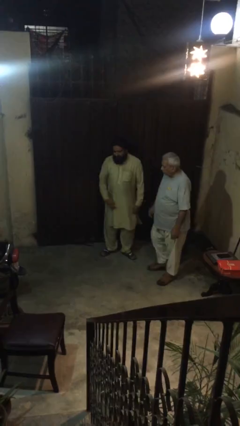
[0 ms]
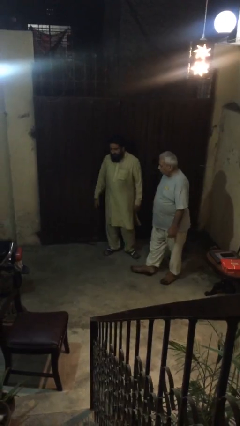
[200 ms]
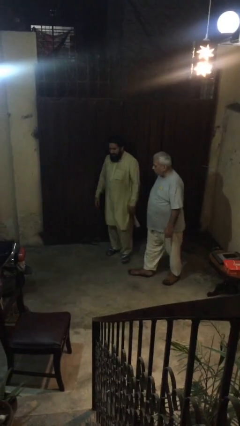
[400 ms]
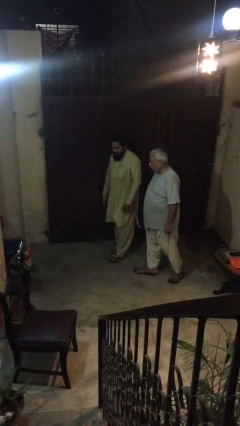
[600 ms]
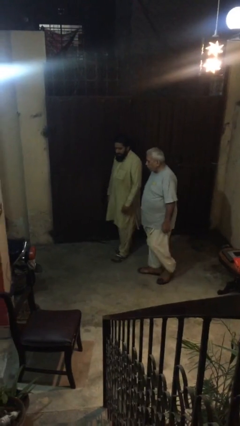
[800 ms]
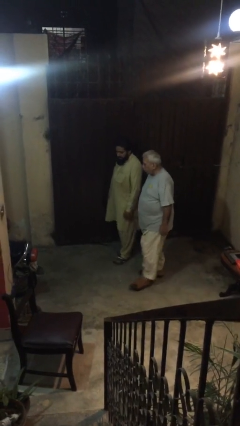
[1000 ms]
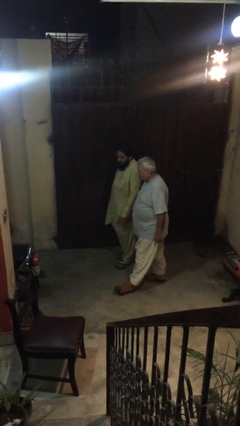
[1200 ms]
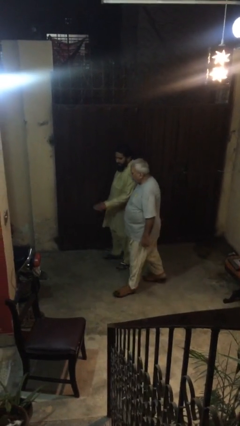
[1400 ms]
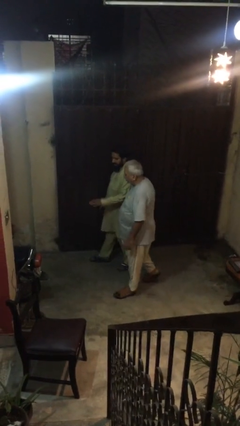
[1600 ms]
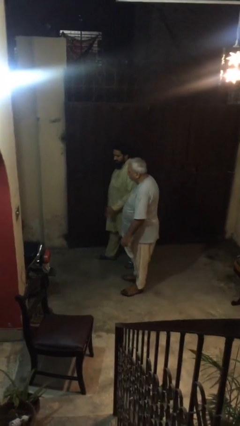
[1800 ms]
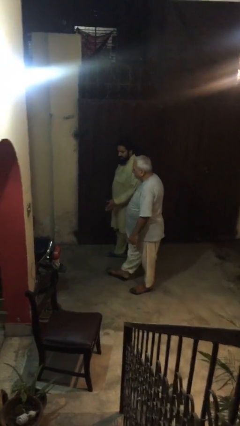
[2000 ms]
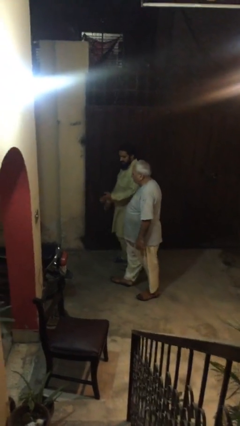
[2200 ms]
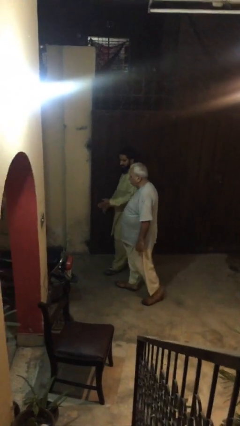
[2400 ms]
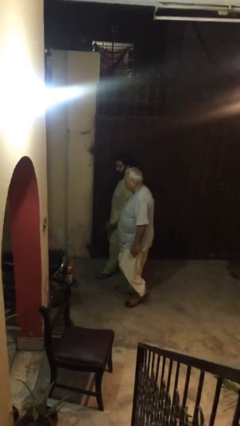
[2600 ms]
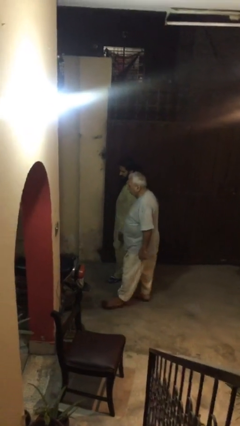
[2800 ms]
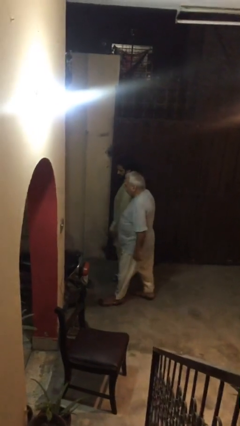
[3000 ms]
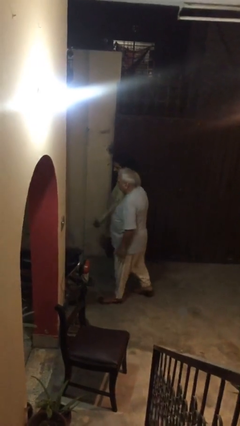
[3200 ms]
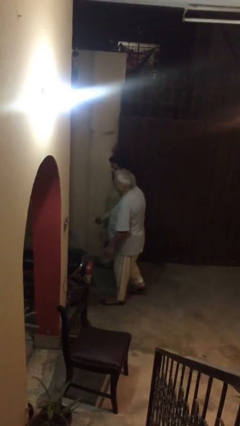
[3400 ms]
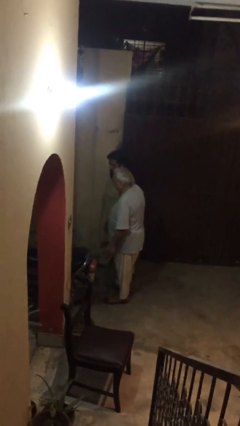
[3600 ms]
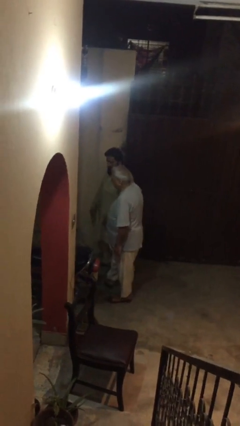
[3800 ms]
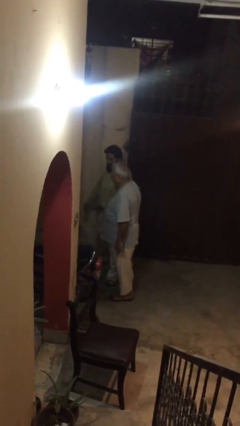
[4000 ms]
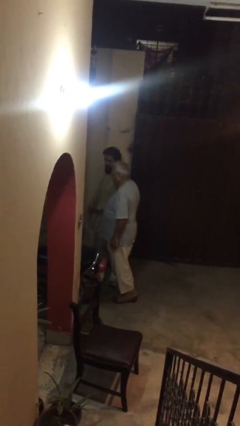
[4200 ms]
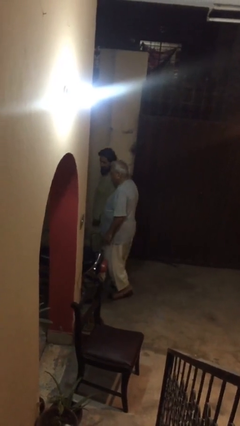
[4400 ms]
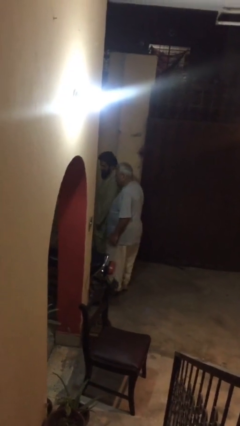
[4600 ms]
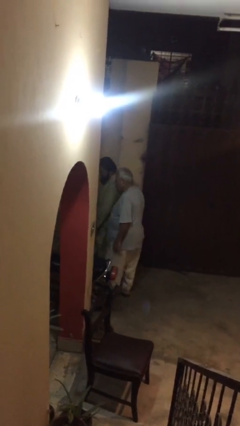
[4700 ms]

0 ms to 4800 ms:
person talks to person

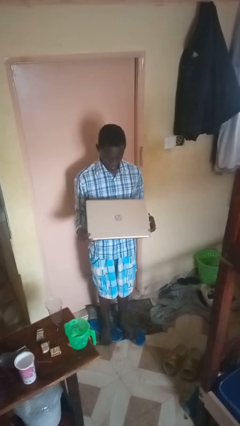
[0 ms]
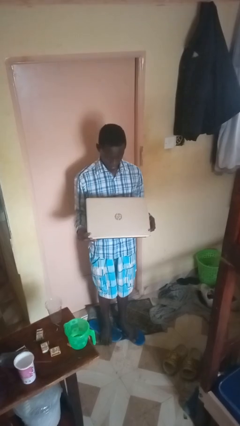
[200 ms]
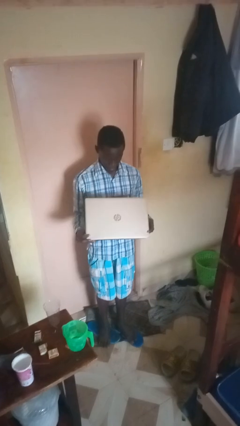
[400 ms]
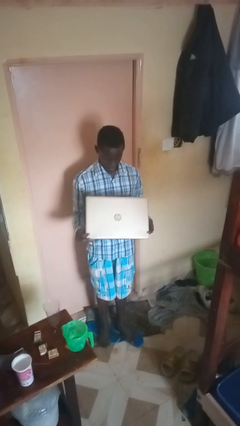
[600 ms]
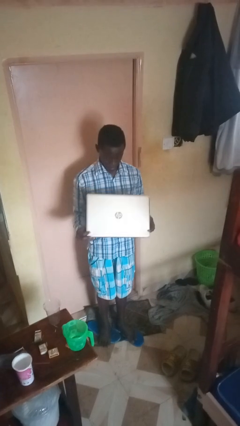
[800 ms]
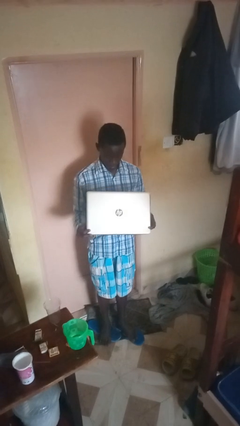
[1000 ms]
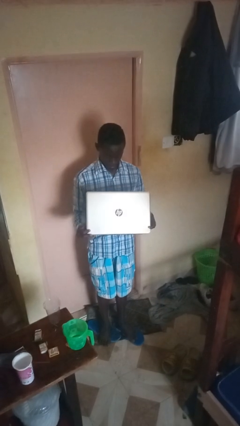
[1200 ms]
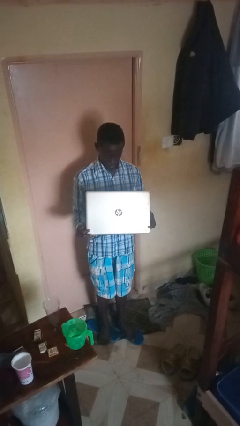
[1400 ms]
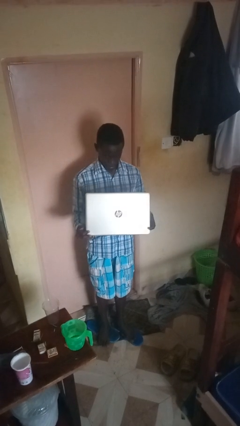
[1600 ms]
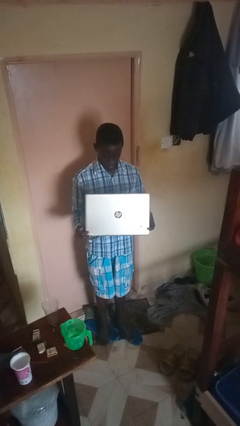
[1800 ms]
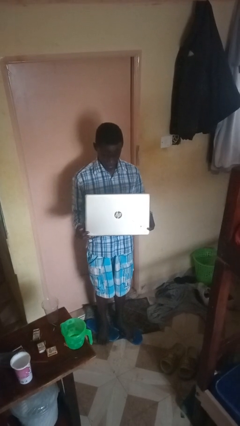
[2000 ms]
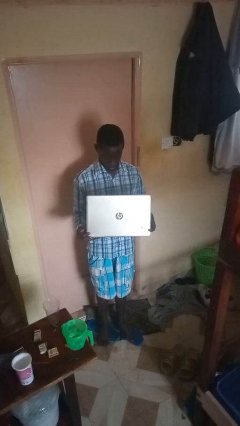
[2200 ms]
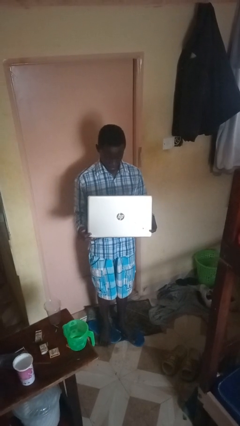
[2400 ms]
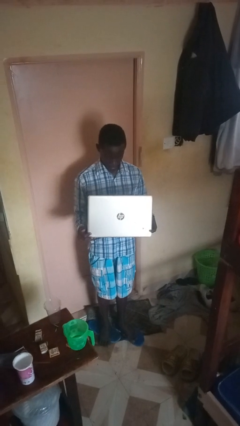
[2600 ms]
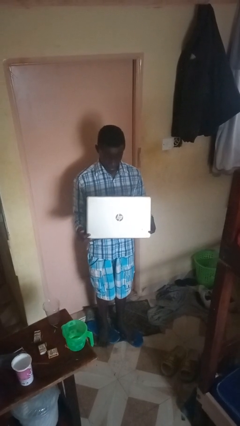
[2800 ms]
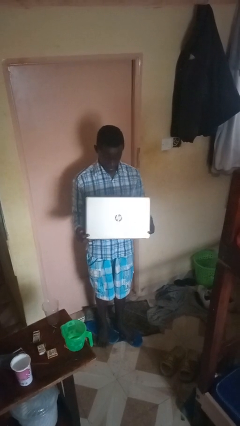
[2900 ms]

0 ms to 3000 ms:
person opens laptop

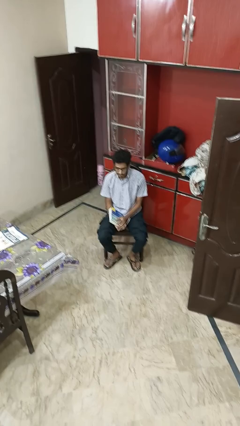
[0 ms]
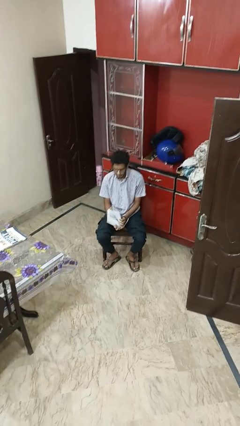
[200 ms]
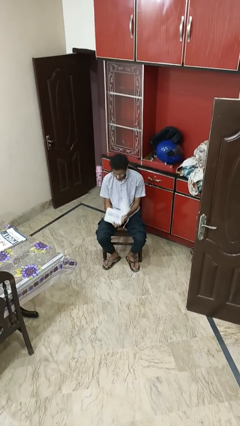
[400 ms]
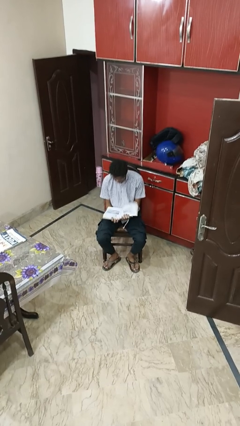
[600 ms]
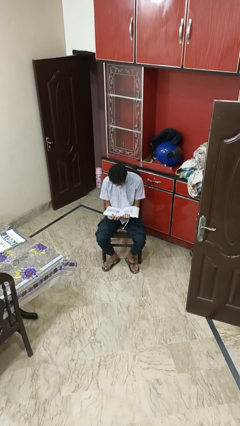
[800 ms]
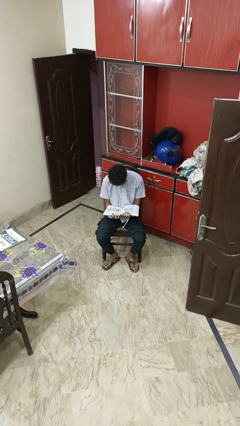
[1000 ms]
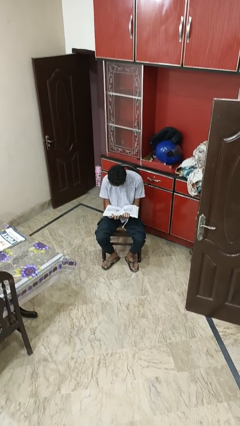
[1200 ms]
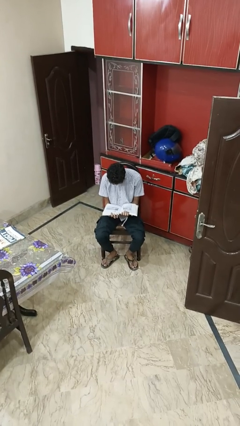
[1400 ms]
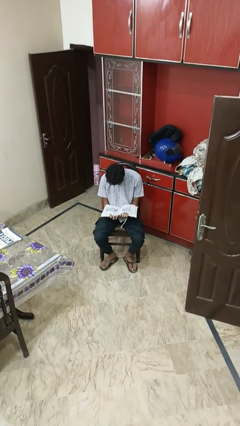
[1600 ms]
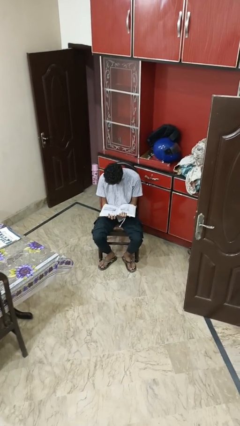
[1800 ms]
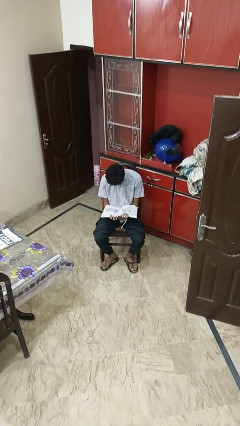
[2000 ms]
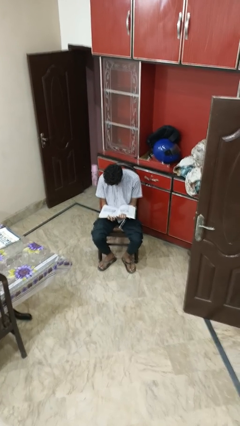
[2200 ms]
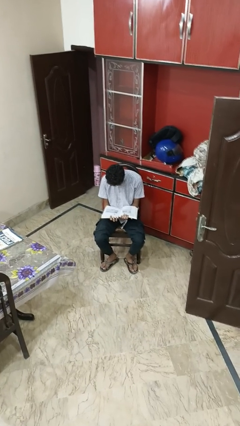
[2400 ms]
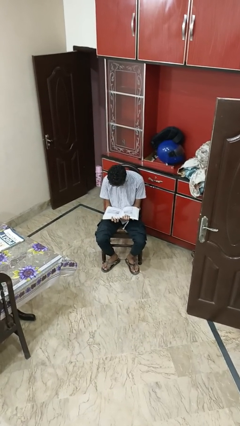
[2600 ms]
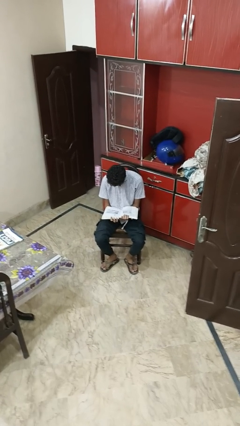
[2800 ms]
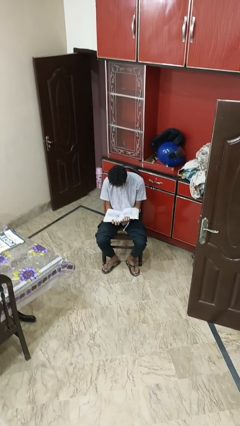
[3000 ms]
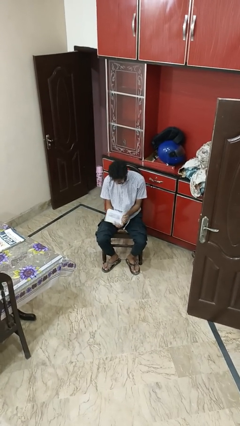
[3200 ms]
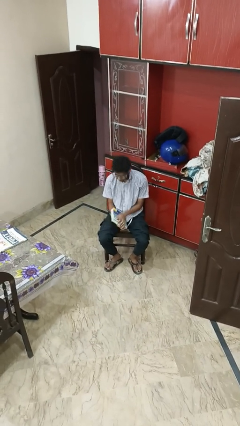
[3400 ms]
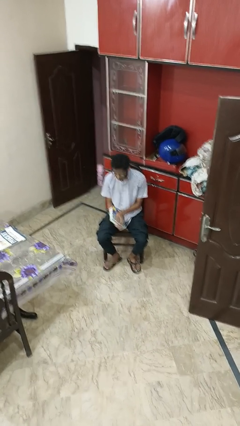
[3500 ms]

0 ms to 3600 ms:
person reads book

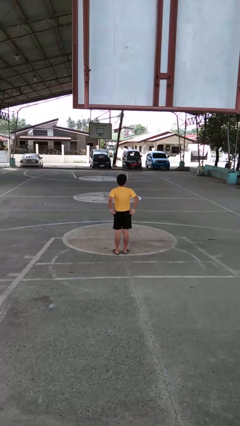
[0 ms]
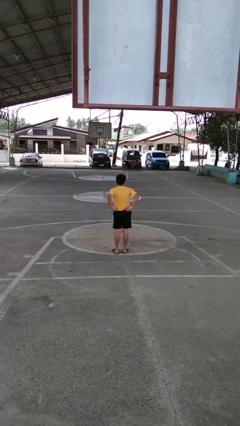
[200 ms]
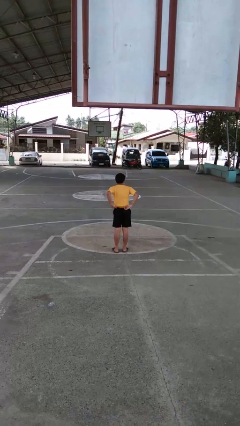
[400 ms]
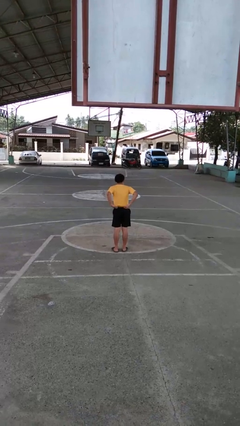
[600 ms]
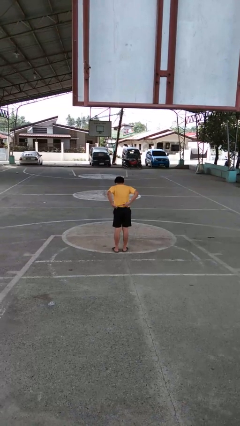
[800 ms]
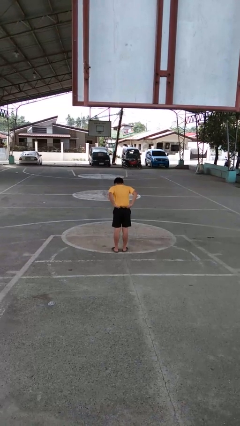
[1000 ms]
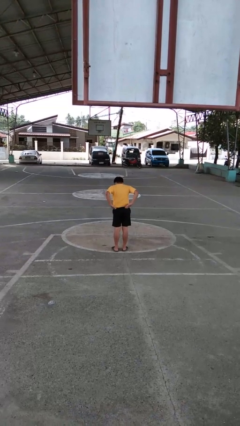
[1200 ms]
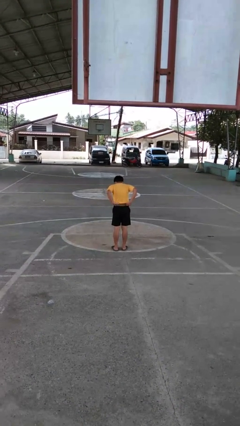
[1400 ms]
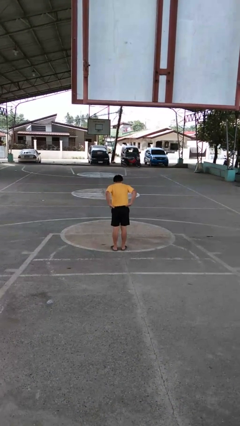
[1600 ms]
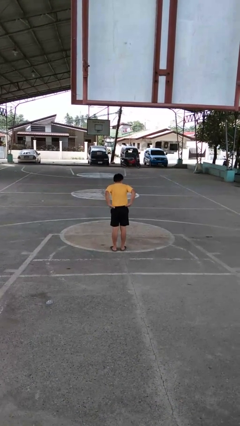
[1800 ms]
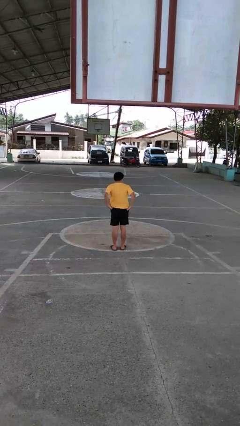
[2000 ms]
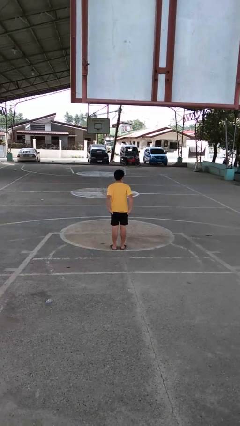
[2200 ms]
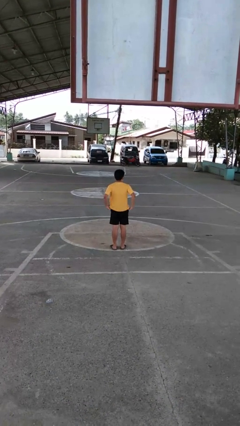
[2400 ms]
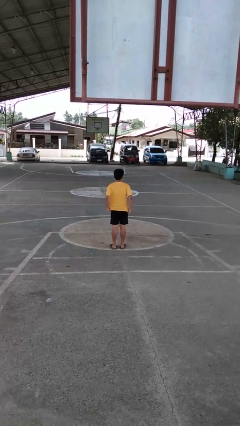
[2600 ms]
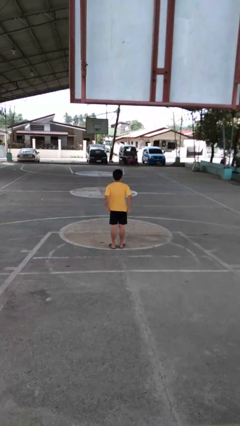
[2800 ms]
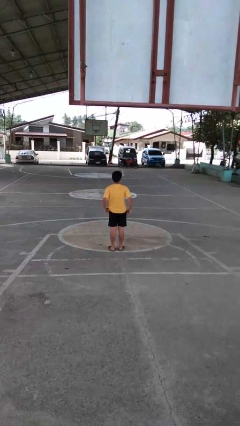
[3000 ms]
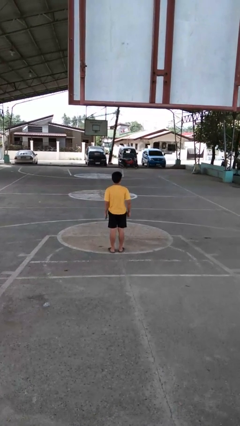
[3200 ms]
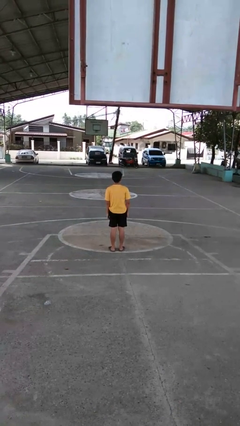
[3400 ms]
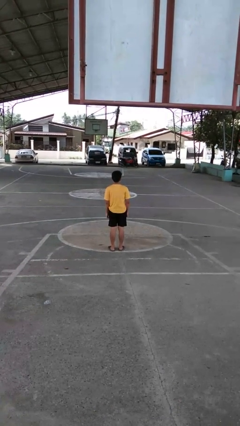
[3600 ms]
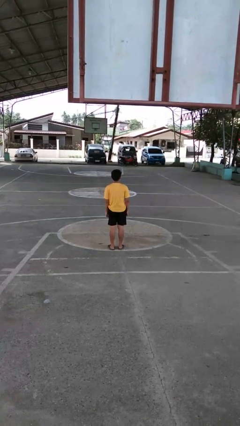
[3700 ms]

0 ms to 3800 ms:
person untucks shirt

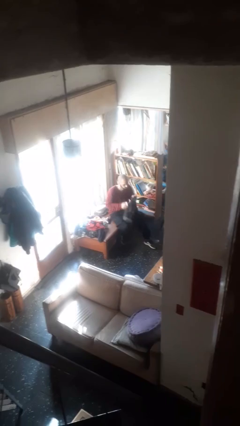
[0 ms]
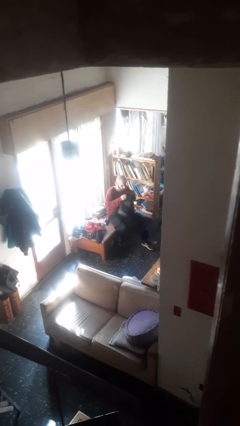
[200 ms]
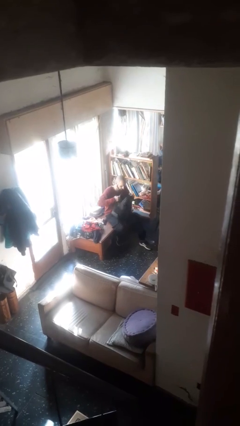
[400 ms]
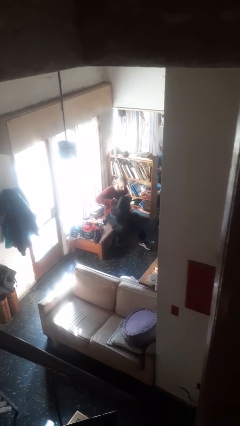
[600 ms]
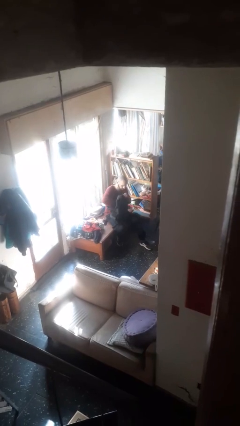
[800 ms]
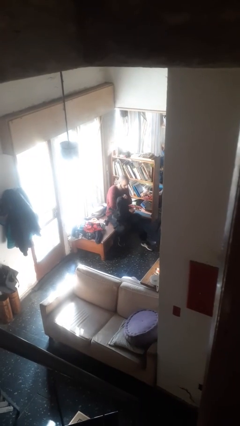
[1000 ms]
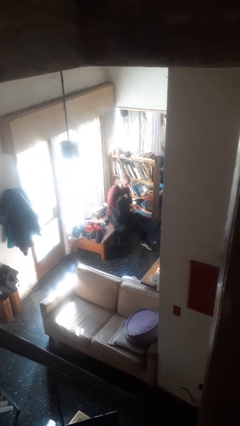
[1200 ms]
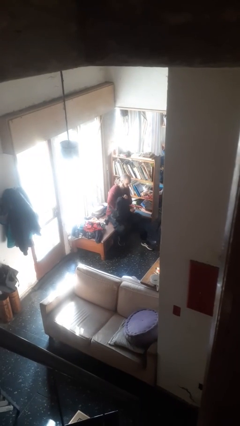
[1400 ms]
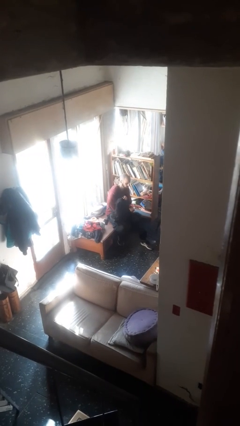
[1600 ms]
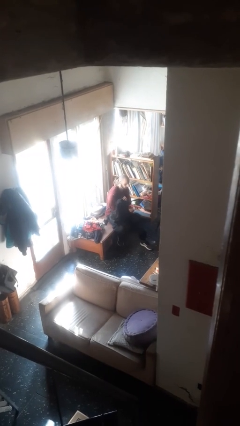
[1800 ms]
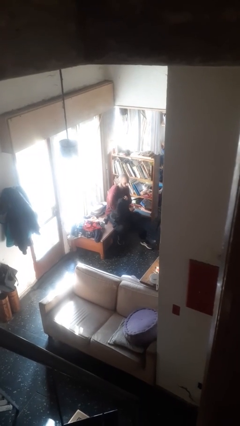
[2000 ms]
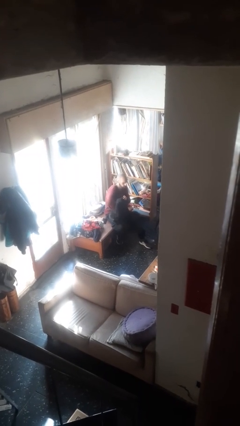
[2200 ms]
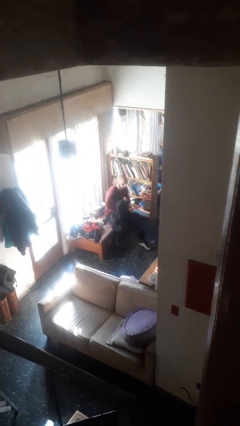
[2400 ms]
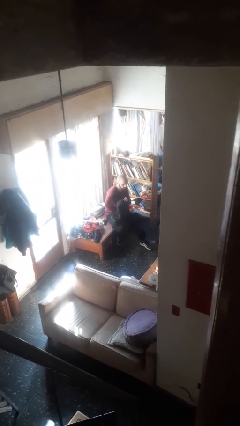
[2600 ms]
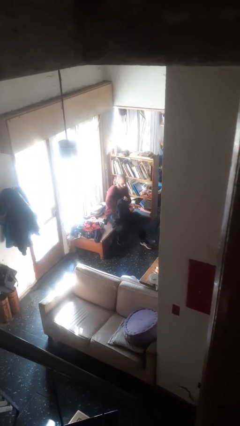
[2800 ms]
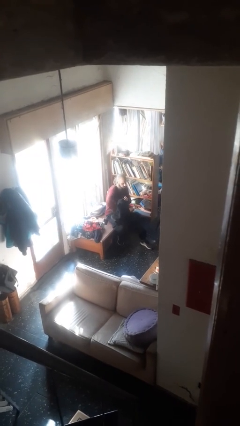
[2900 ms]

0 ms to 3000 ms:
person searches in backpack
